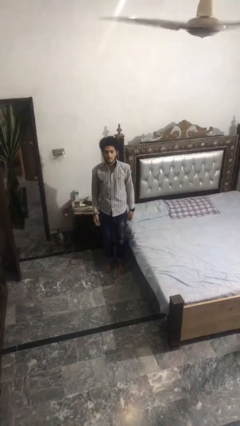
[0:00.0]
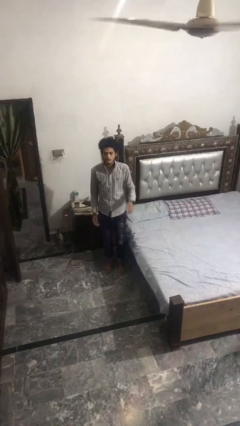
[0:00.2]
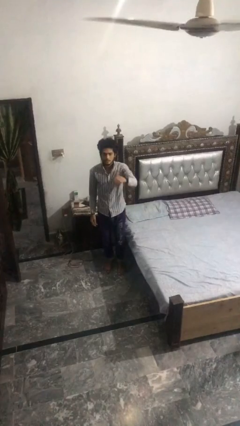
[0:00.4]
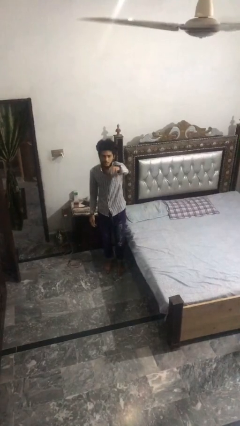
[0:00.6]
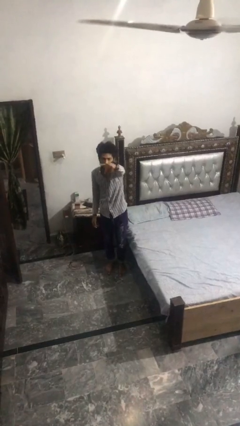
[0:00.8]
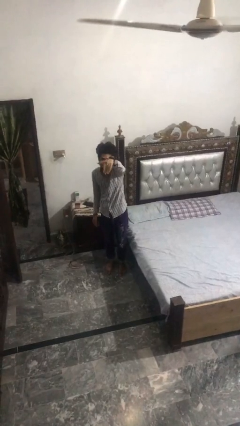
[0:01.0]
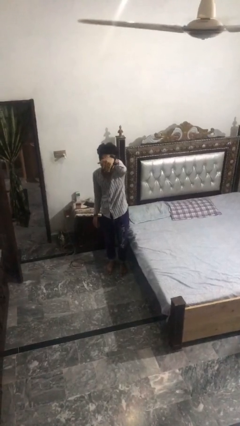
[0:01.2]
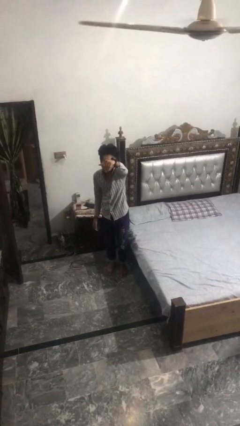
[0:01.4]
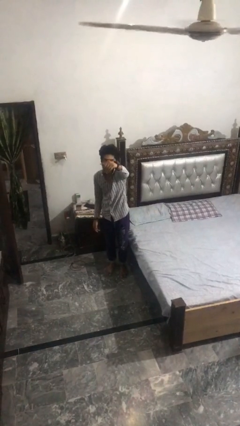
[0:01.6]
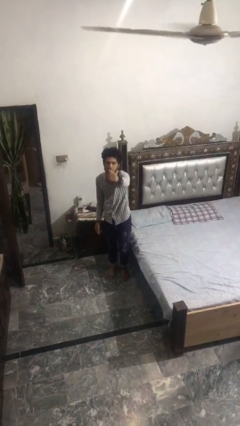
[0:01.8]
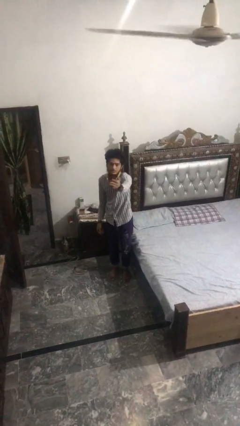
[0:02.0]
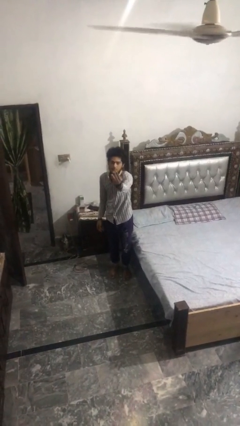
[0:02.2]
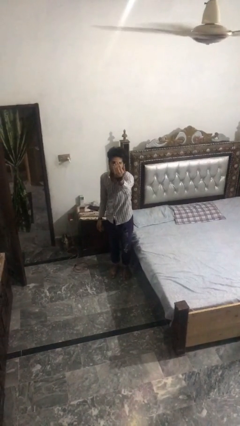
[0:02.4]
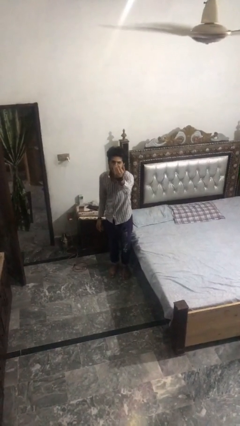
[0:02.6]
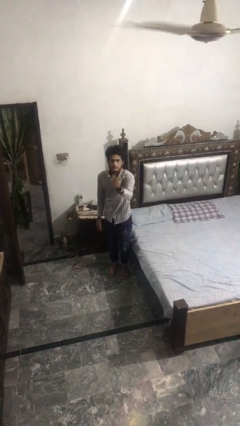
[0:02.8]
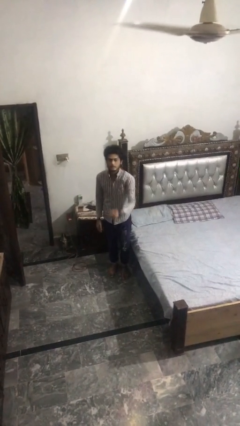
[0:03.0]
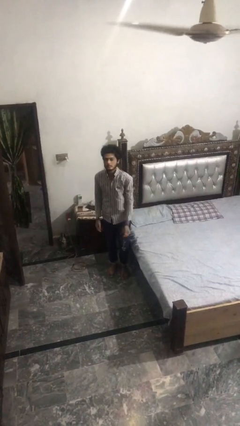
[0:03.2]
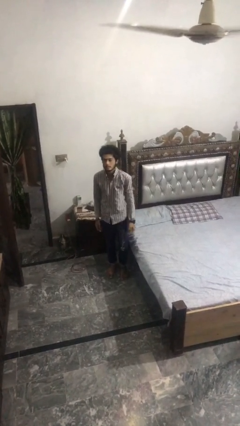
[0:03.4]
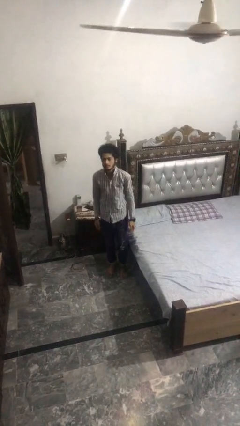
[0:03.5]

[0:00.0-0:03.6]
person gestures come here

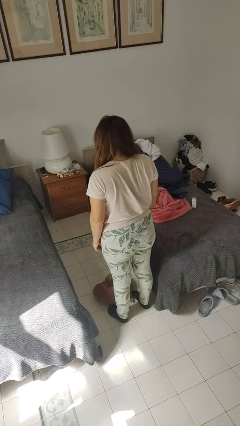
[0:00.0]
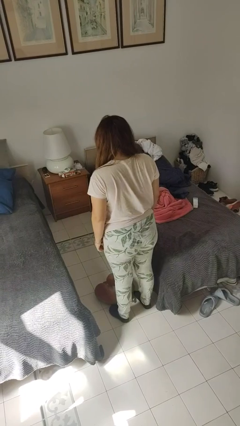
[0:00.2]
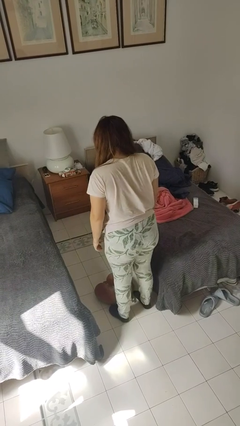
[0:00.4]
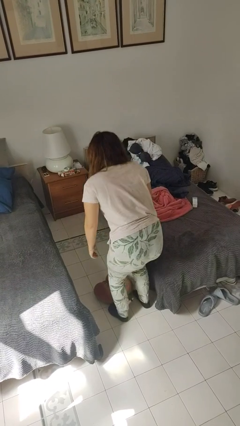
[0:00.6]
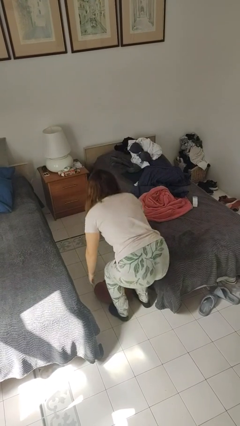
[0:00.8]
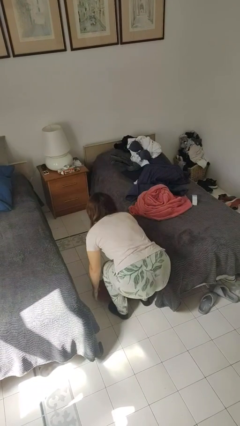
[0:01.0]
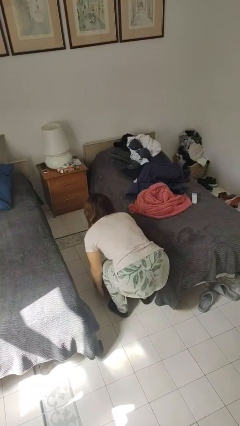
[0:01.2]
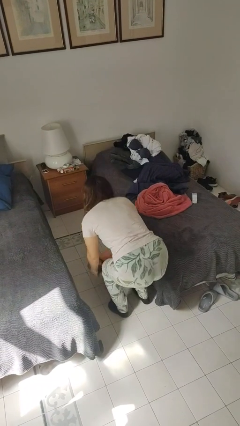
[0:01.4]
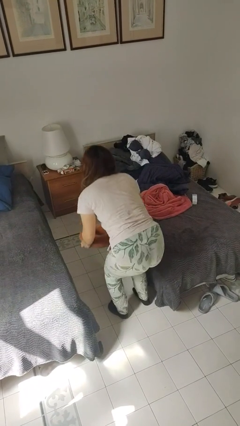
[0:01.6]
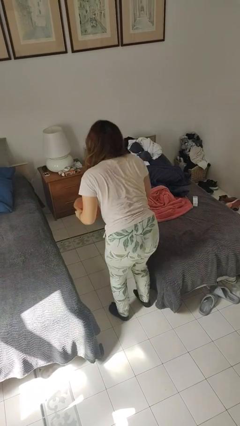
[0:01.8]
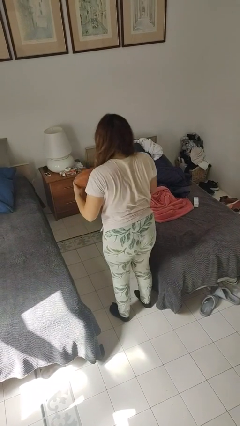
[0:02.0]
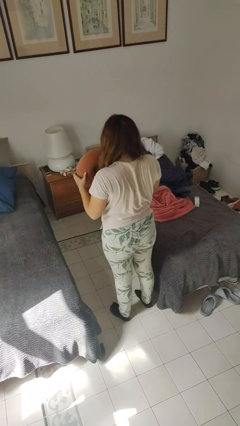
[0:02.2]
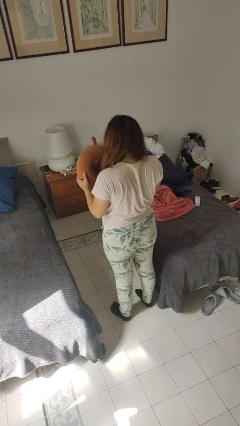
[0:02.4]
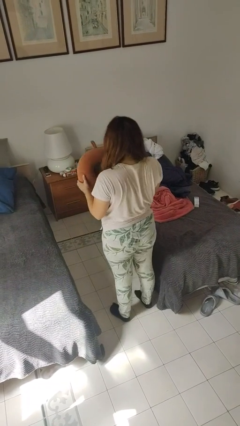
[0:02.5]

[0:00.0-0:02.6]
person picks up object from floor

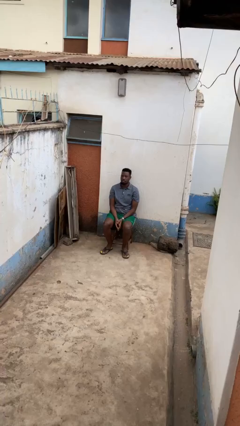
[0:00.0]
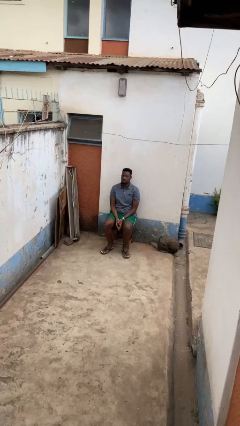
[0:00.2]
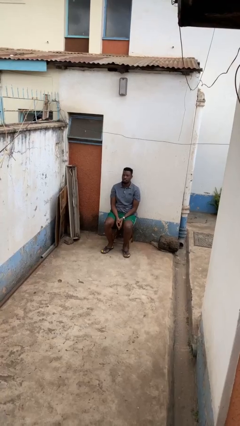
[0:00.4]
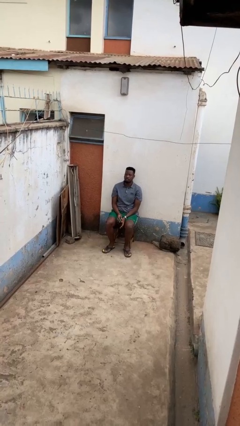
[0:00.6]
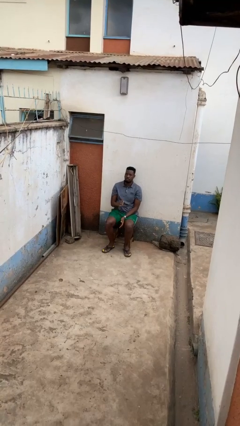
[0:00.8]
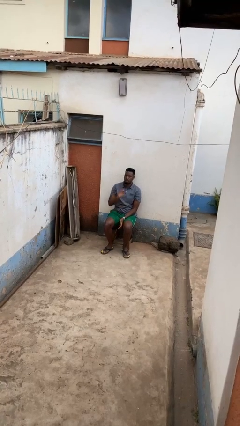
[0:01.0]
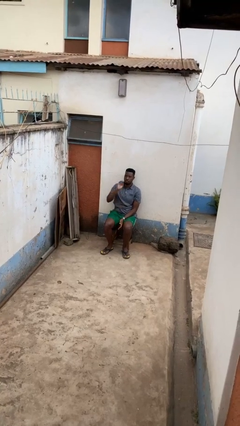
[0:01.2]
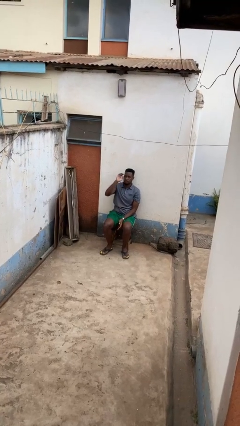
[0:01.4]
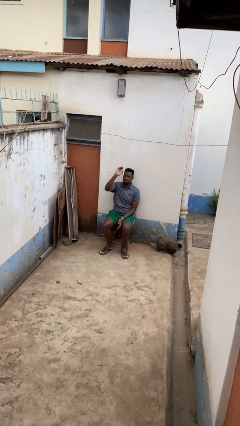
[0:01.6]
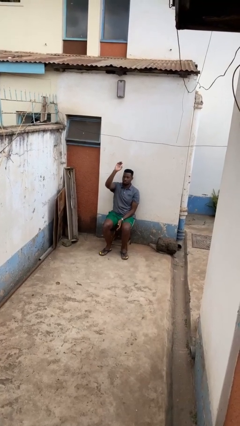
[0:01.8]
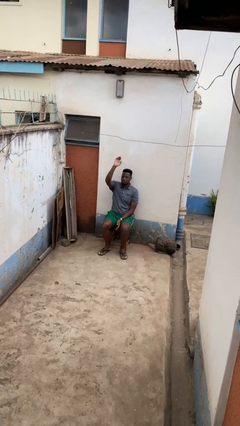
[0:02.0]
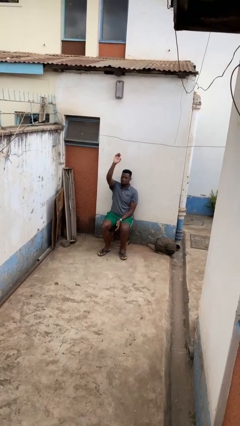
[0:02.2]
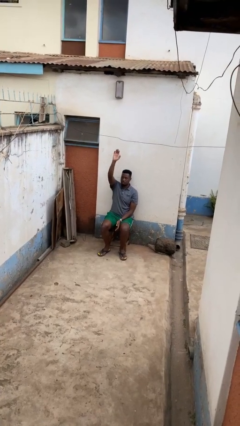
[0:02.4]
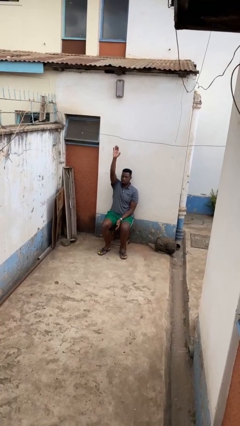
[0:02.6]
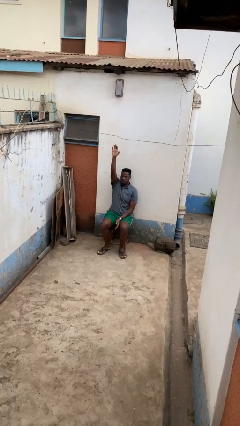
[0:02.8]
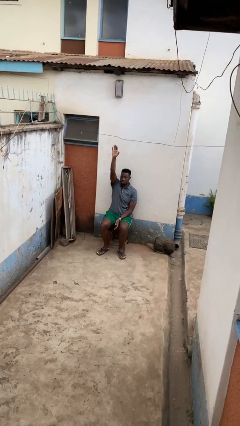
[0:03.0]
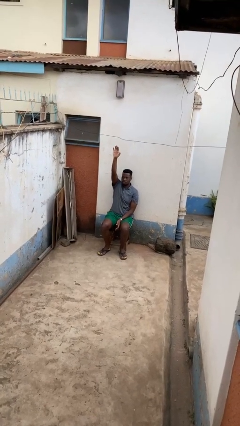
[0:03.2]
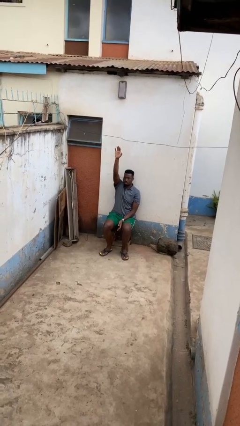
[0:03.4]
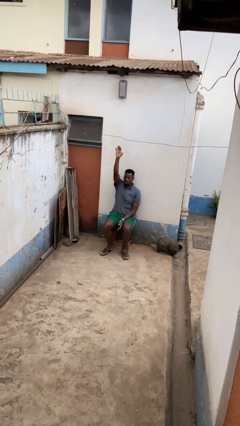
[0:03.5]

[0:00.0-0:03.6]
person gestures raise hand

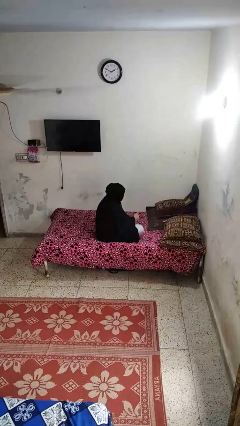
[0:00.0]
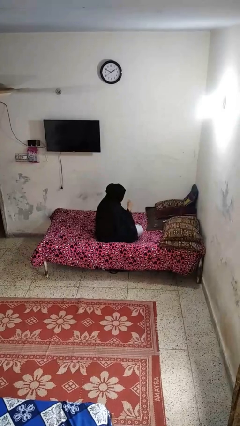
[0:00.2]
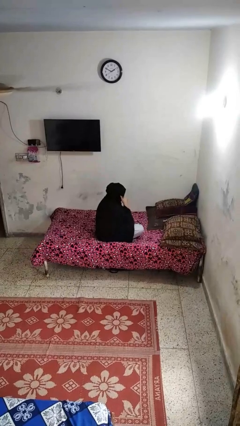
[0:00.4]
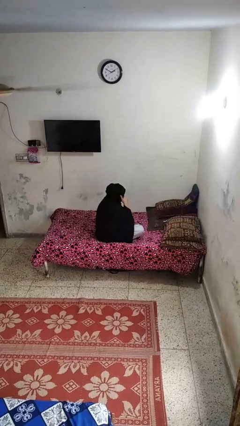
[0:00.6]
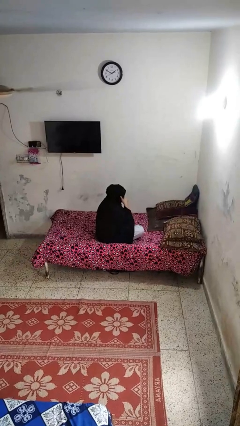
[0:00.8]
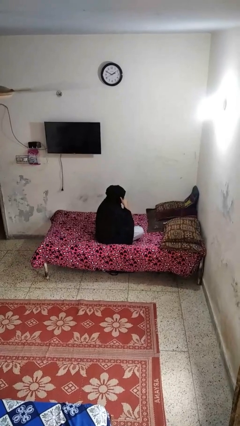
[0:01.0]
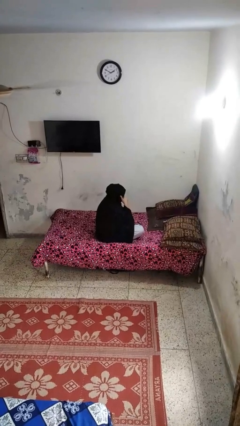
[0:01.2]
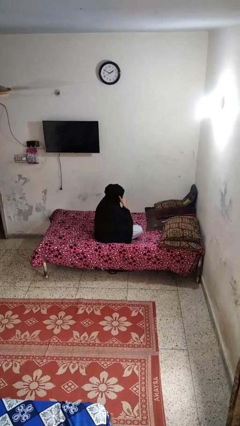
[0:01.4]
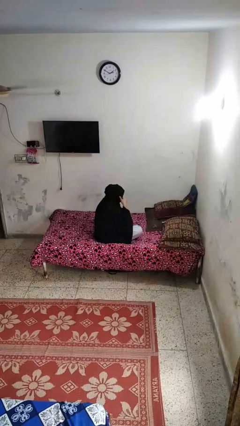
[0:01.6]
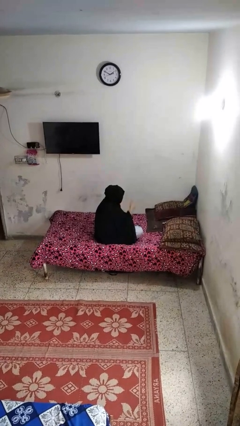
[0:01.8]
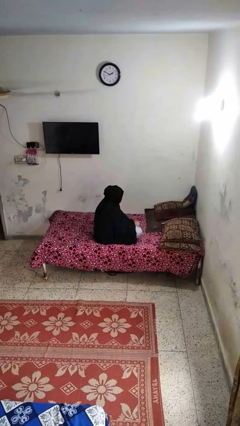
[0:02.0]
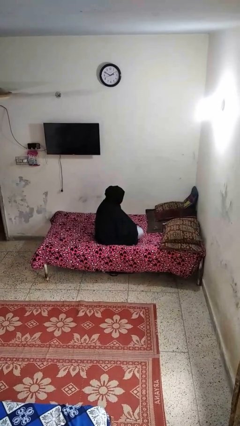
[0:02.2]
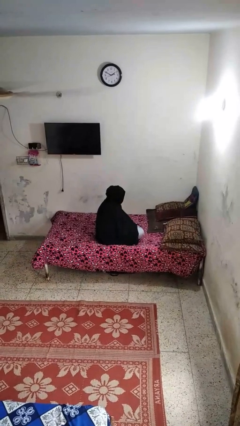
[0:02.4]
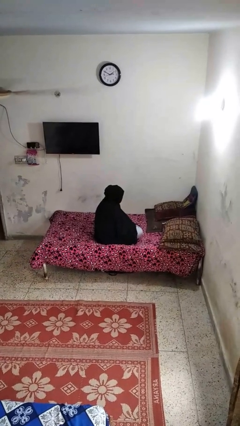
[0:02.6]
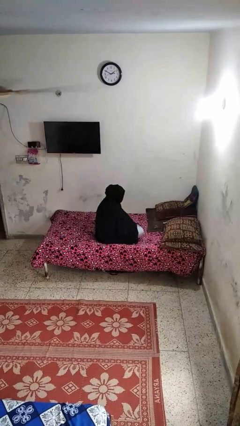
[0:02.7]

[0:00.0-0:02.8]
person gestures call me

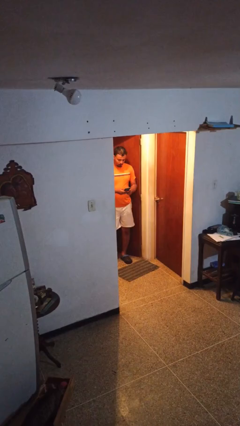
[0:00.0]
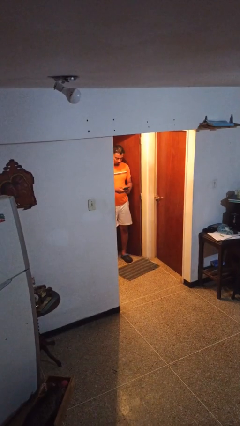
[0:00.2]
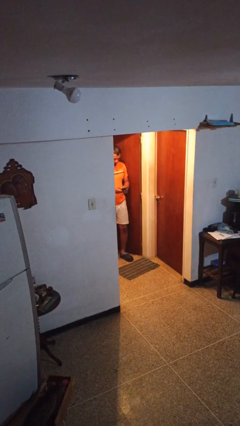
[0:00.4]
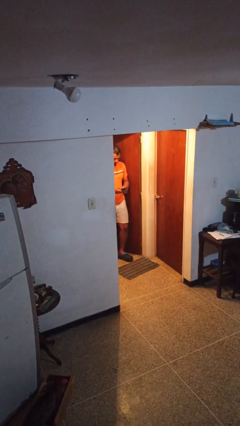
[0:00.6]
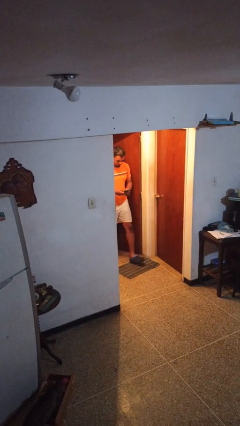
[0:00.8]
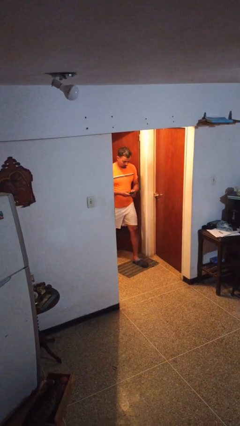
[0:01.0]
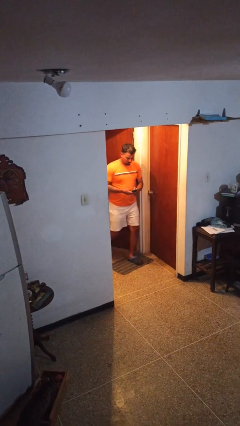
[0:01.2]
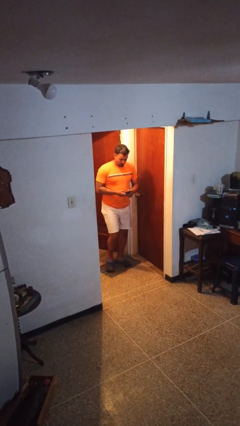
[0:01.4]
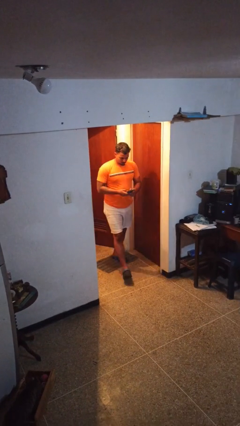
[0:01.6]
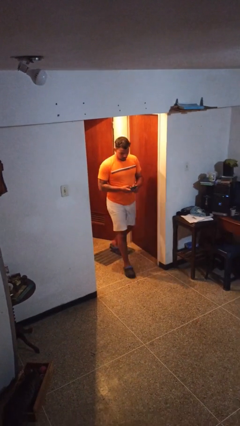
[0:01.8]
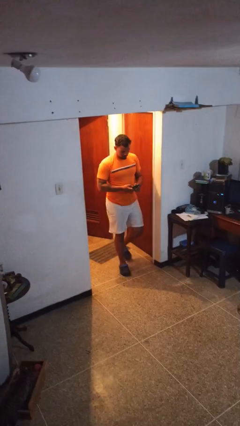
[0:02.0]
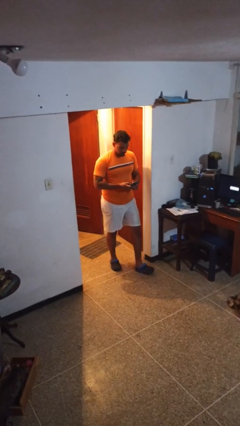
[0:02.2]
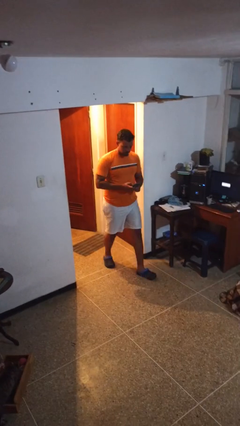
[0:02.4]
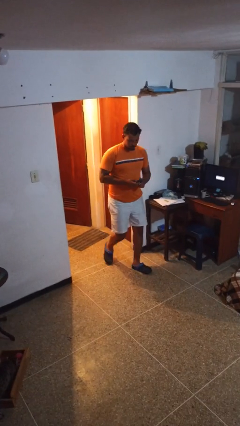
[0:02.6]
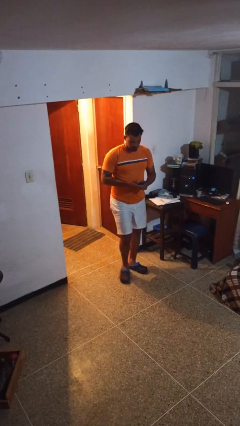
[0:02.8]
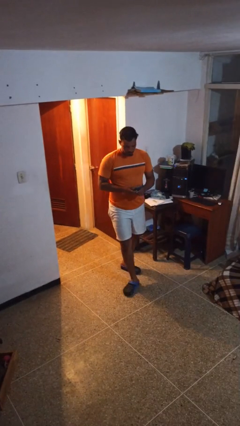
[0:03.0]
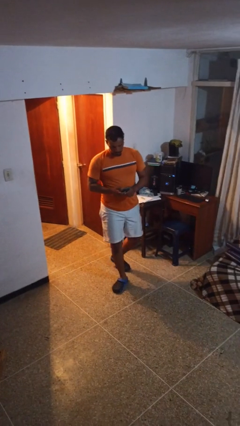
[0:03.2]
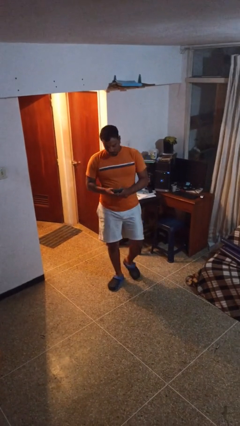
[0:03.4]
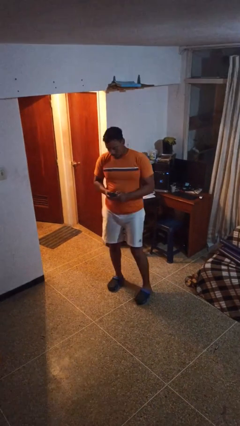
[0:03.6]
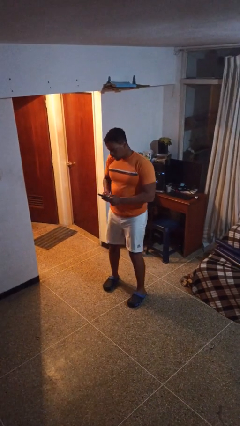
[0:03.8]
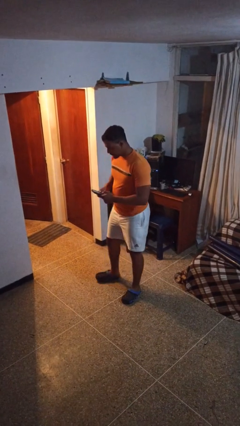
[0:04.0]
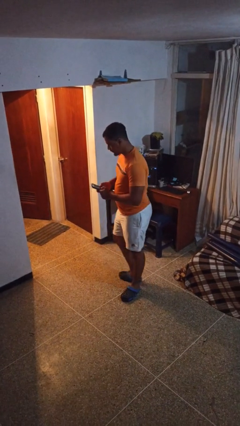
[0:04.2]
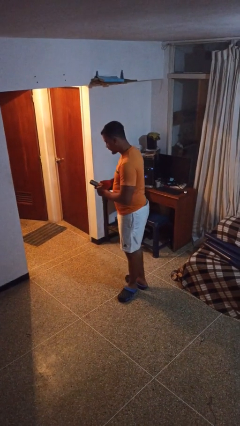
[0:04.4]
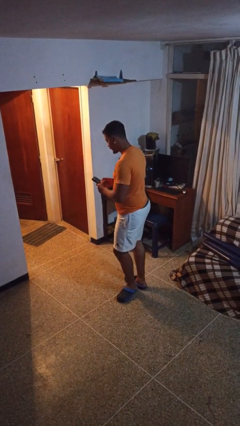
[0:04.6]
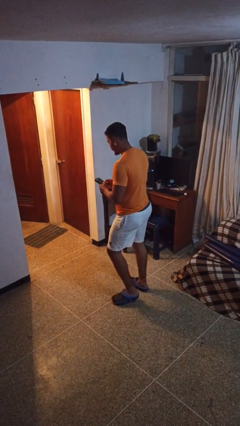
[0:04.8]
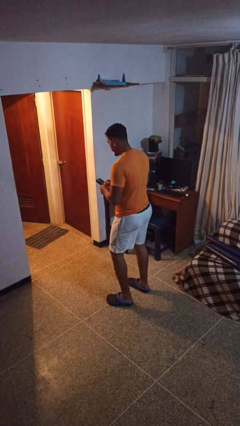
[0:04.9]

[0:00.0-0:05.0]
person enters scene through structure
